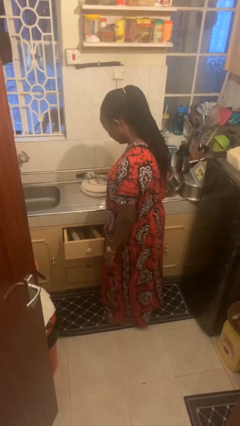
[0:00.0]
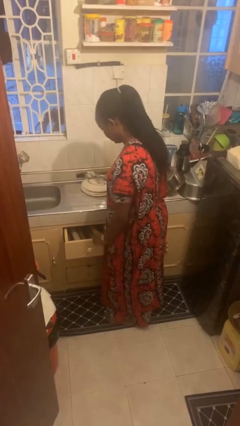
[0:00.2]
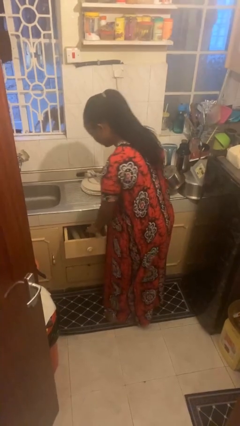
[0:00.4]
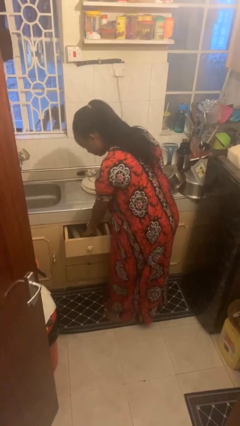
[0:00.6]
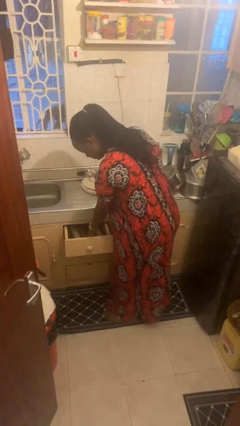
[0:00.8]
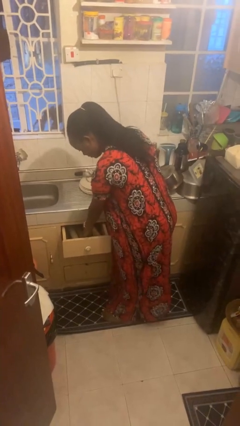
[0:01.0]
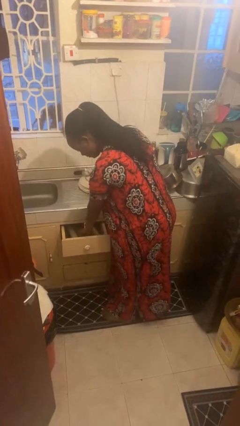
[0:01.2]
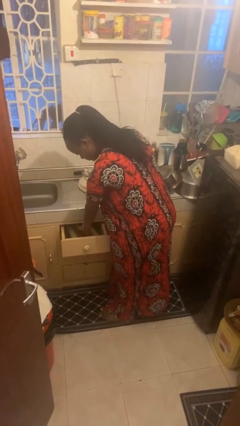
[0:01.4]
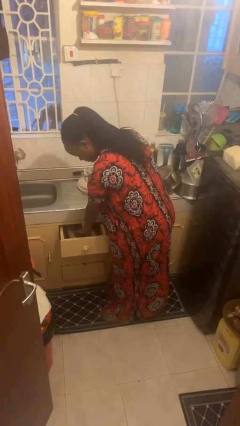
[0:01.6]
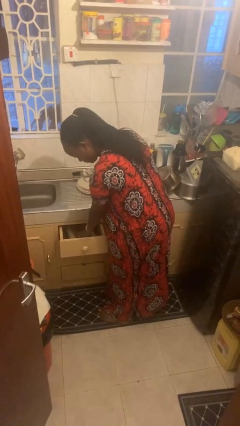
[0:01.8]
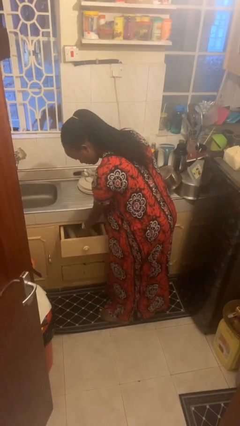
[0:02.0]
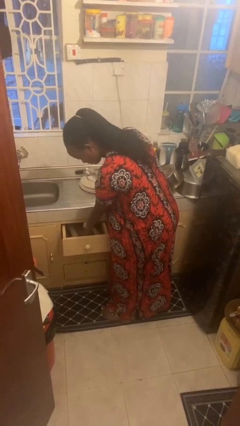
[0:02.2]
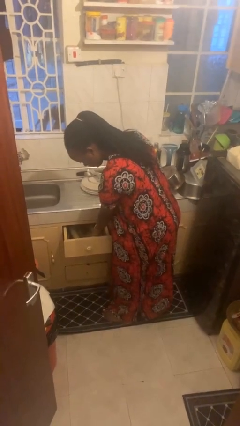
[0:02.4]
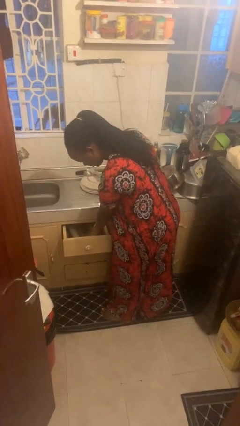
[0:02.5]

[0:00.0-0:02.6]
person searches in kitchen drawer

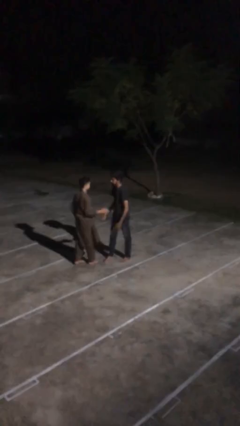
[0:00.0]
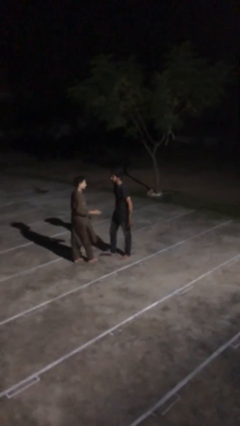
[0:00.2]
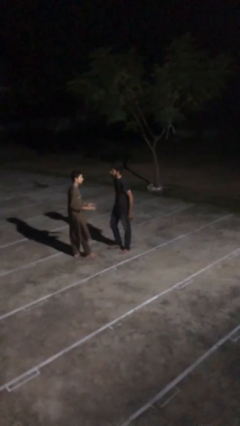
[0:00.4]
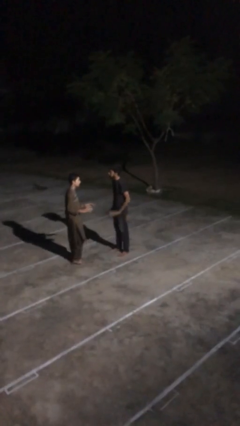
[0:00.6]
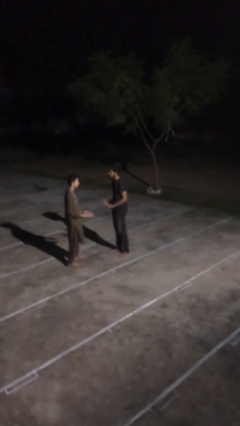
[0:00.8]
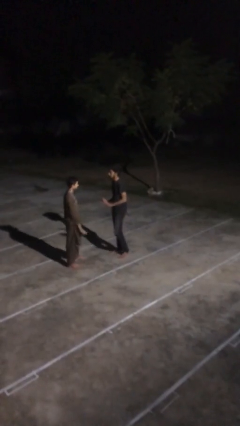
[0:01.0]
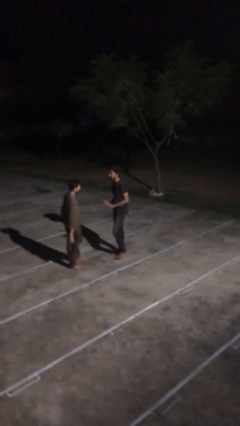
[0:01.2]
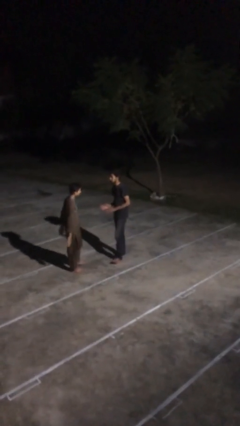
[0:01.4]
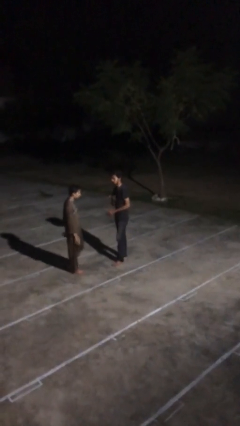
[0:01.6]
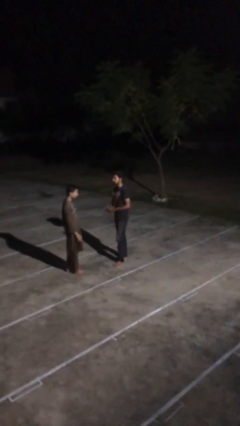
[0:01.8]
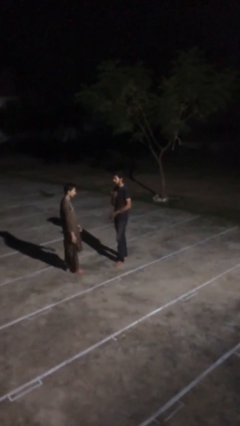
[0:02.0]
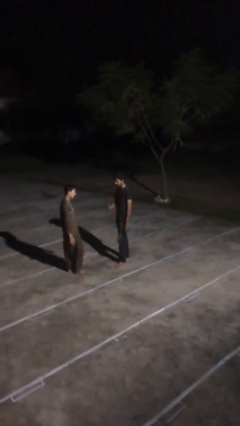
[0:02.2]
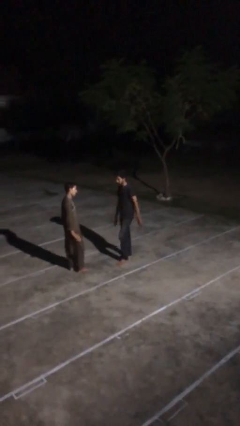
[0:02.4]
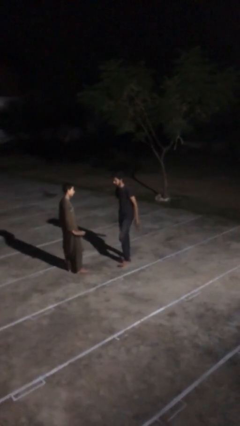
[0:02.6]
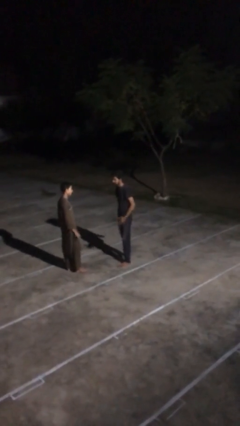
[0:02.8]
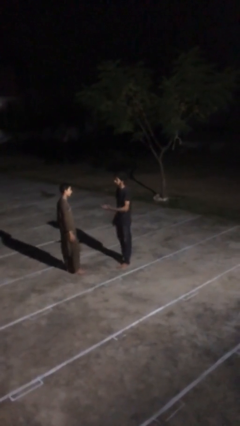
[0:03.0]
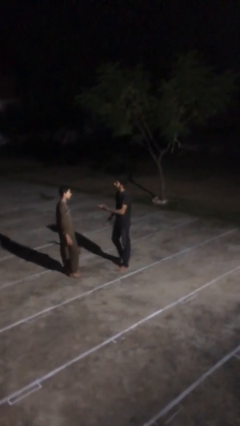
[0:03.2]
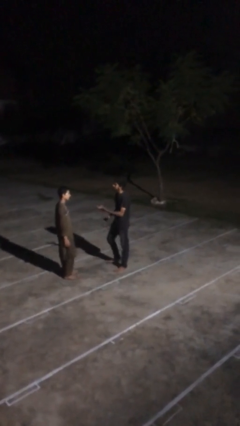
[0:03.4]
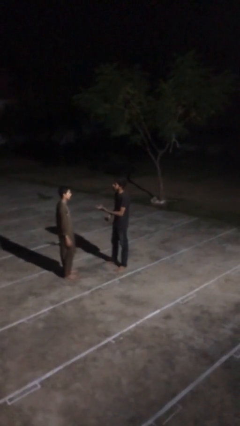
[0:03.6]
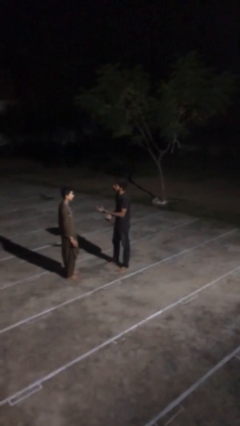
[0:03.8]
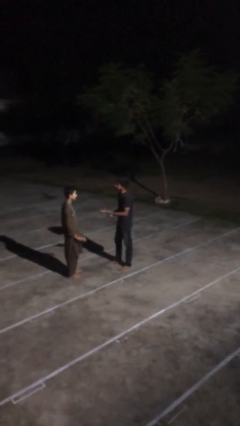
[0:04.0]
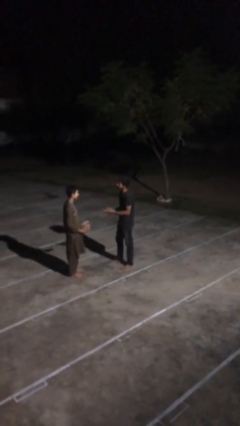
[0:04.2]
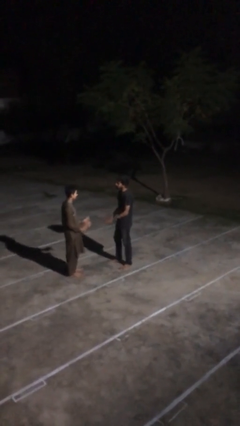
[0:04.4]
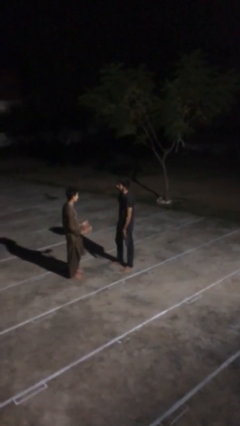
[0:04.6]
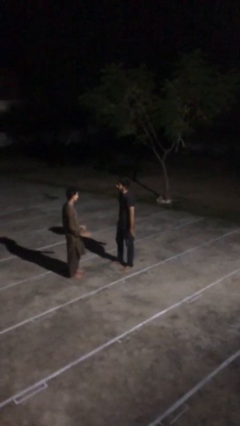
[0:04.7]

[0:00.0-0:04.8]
person talks to person

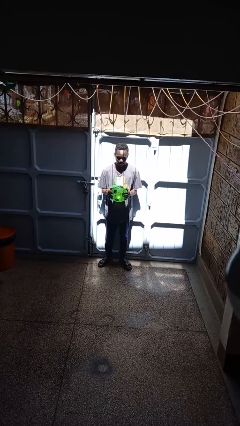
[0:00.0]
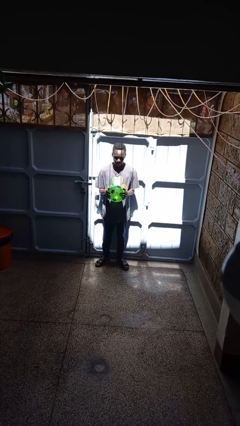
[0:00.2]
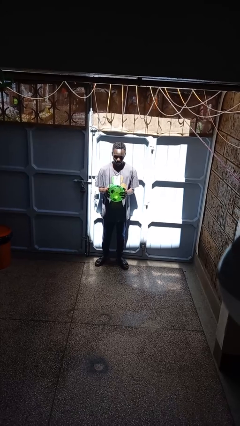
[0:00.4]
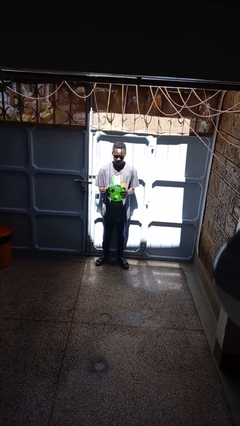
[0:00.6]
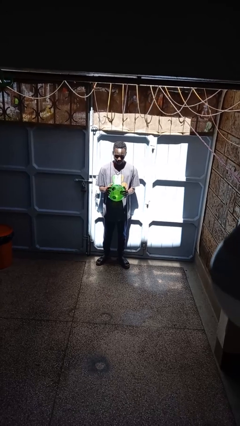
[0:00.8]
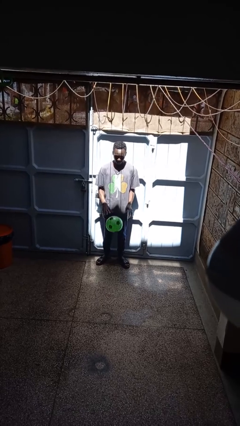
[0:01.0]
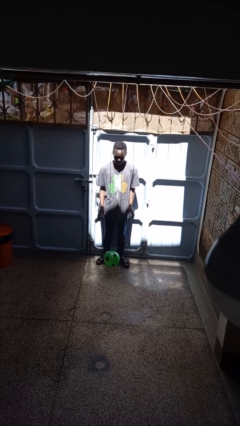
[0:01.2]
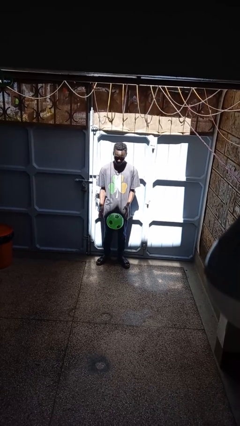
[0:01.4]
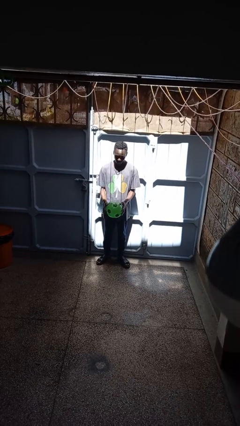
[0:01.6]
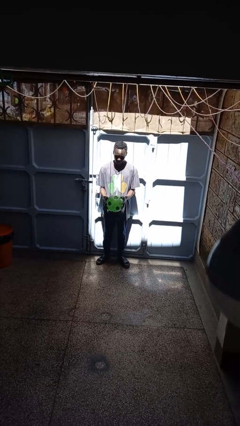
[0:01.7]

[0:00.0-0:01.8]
person bounces ball on floor

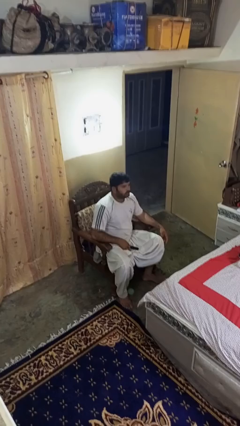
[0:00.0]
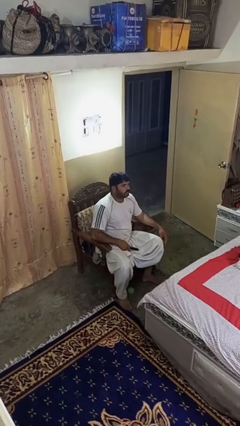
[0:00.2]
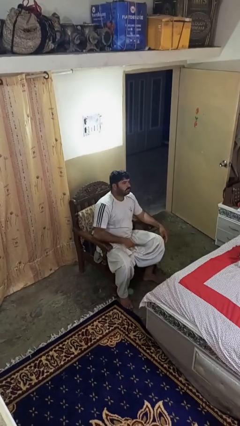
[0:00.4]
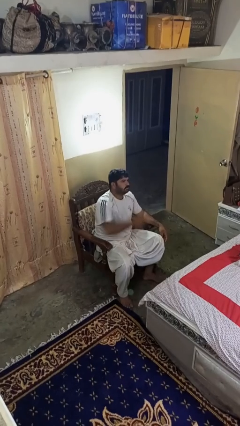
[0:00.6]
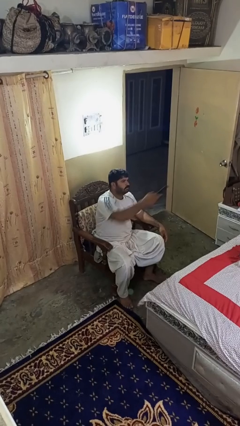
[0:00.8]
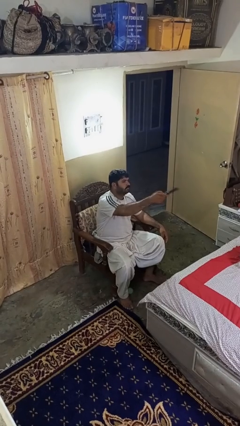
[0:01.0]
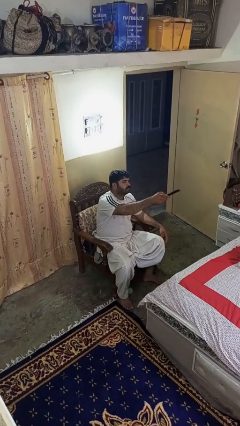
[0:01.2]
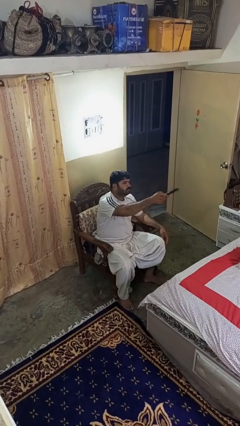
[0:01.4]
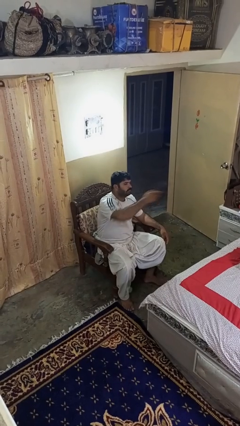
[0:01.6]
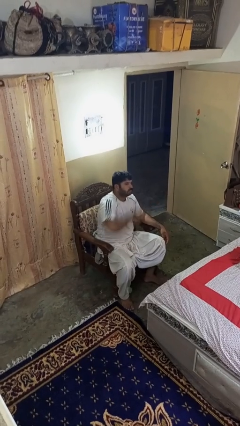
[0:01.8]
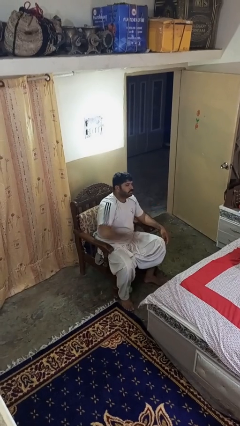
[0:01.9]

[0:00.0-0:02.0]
person uses television remote

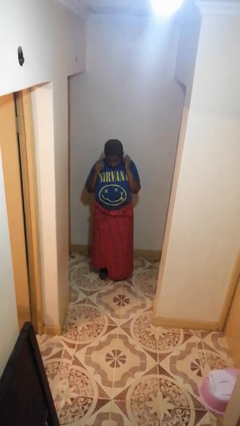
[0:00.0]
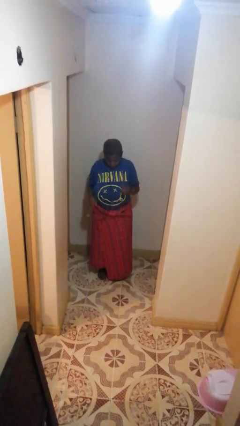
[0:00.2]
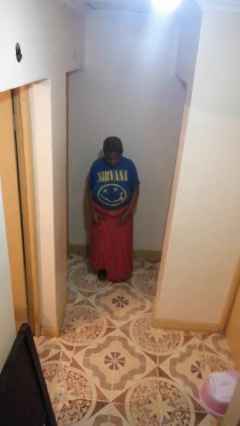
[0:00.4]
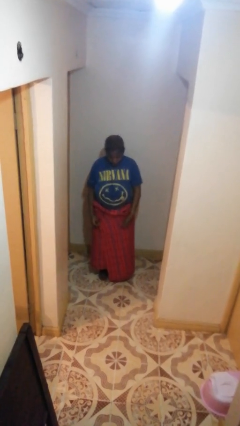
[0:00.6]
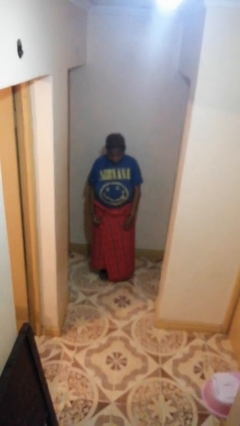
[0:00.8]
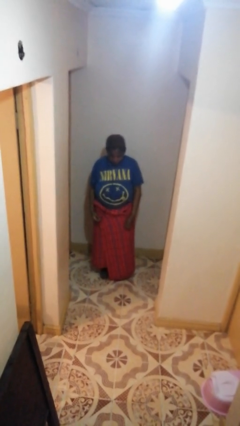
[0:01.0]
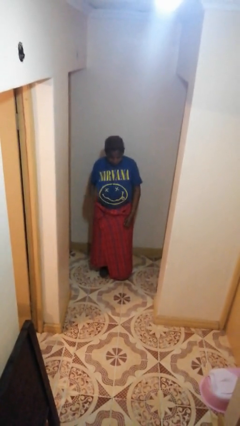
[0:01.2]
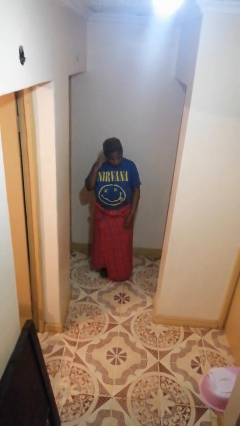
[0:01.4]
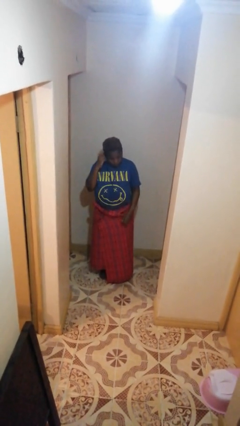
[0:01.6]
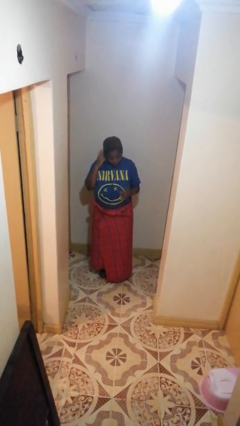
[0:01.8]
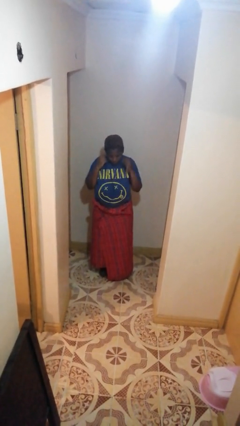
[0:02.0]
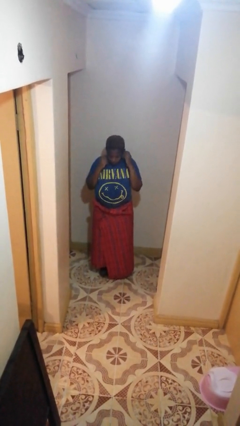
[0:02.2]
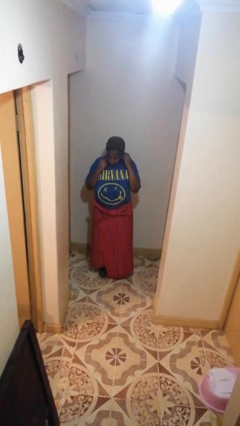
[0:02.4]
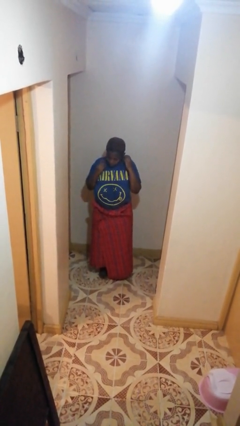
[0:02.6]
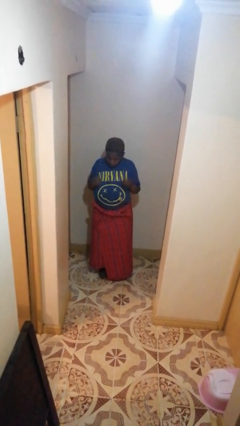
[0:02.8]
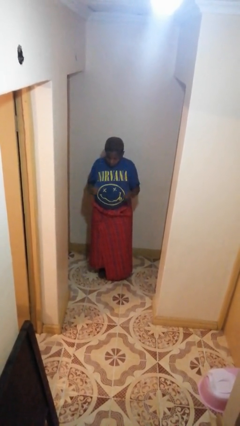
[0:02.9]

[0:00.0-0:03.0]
person takes off headphones

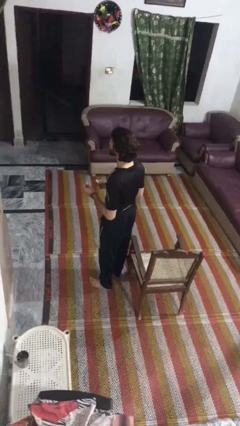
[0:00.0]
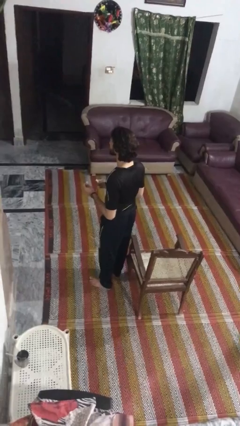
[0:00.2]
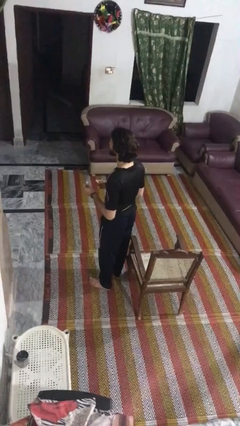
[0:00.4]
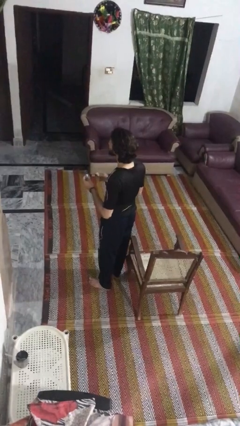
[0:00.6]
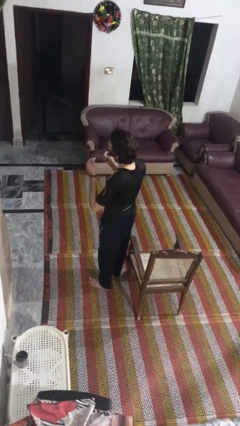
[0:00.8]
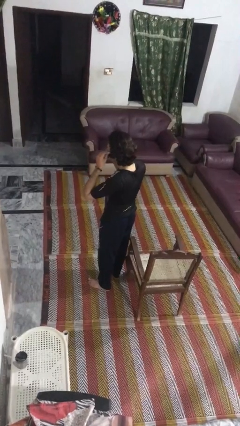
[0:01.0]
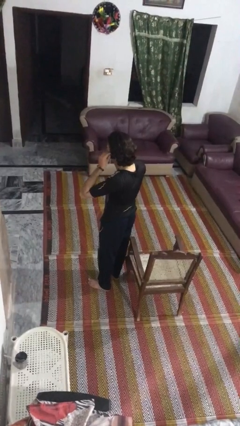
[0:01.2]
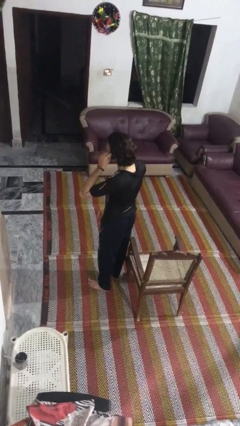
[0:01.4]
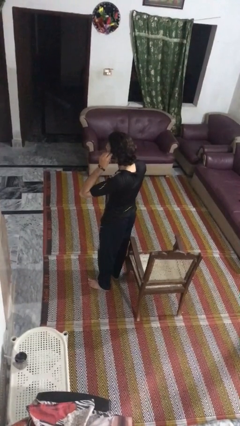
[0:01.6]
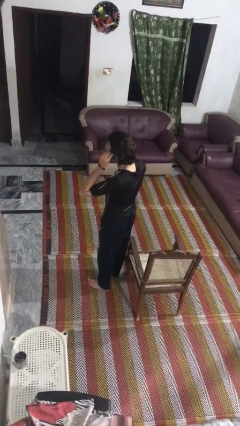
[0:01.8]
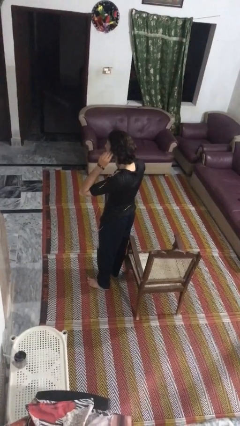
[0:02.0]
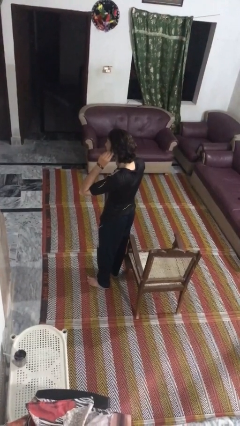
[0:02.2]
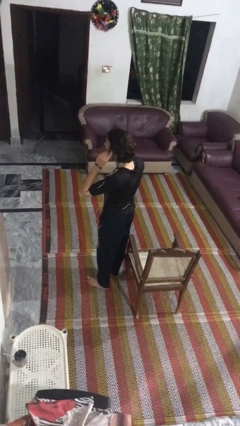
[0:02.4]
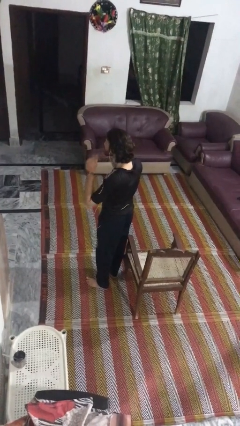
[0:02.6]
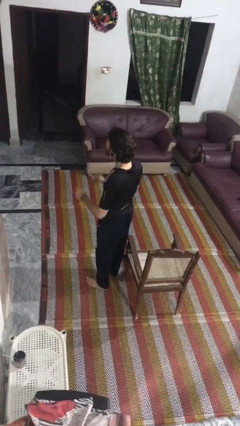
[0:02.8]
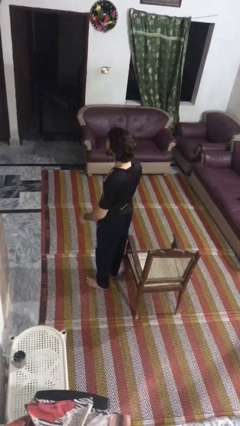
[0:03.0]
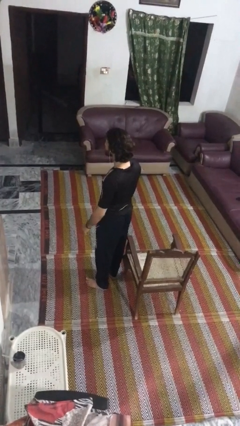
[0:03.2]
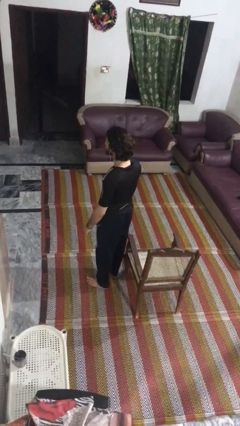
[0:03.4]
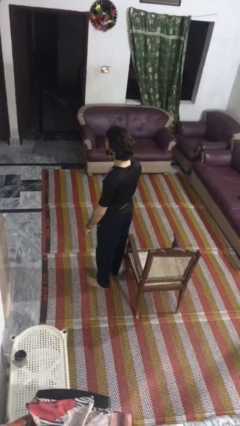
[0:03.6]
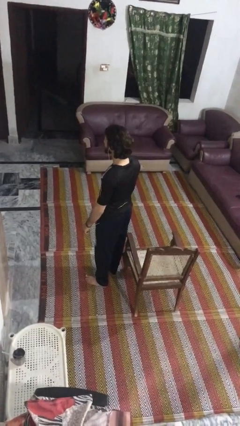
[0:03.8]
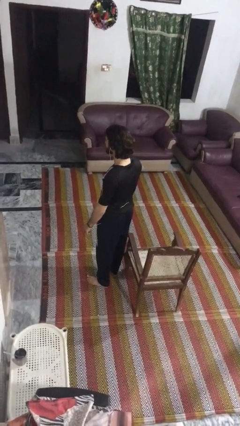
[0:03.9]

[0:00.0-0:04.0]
person puts on headphones
